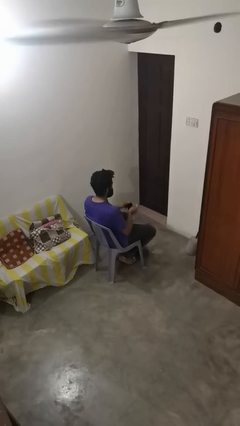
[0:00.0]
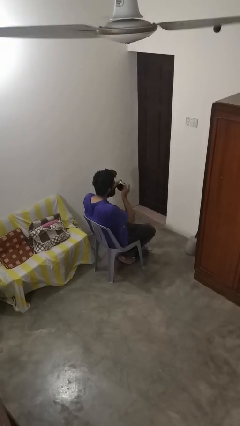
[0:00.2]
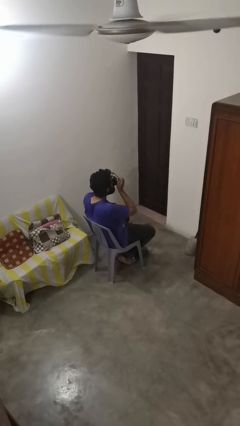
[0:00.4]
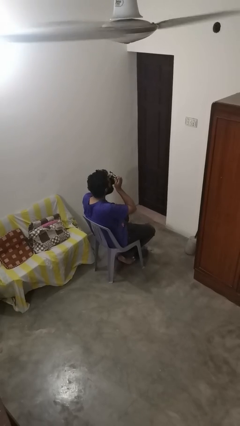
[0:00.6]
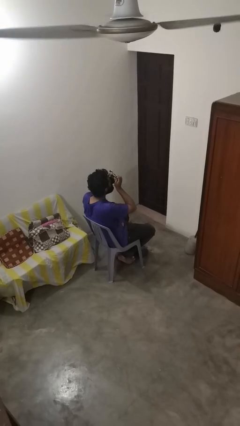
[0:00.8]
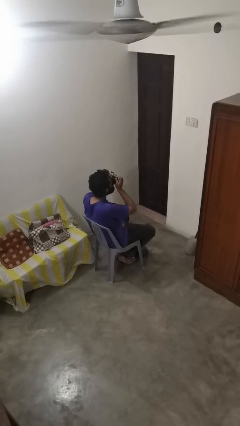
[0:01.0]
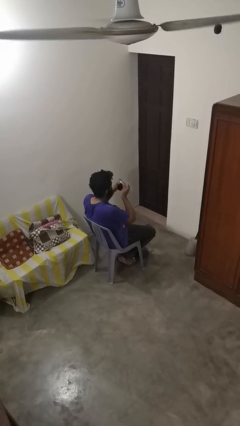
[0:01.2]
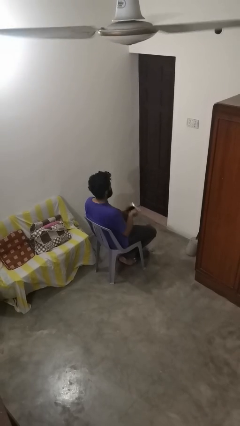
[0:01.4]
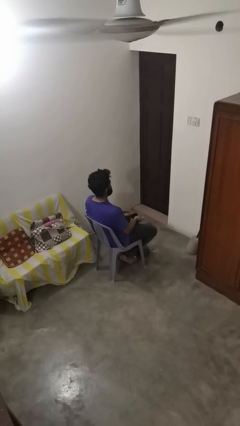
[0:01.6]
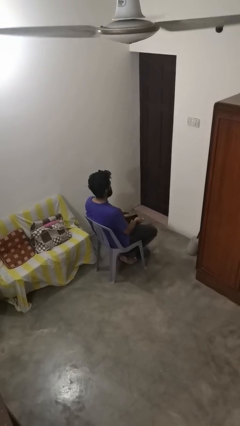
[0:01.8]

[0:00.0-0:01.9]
person drinks from mug

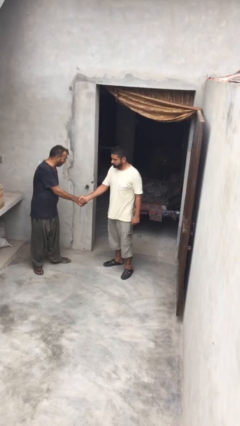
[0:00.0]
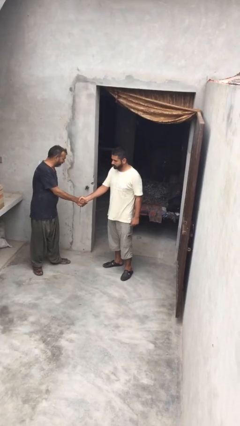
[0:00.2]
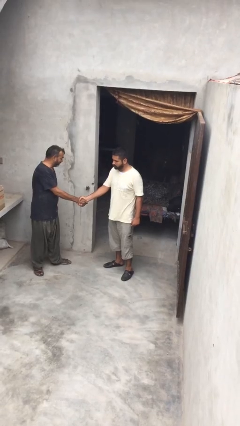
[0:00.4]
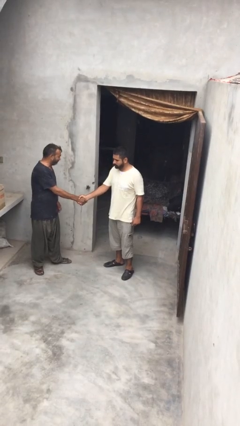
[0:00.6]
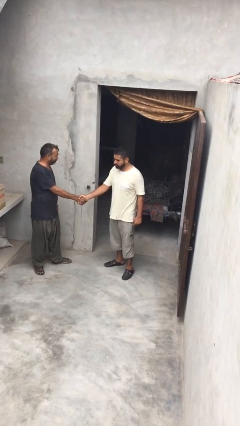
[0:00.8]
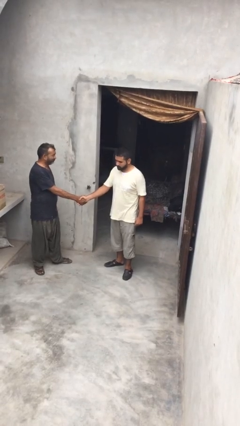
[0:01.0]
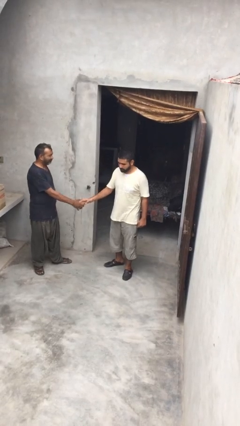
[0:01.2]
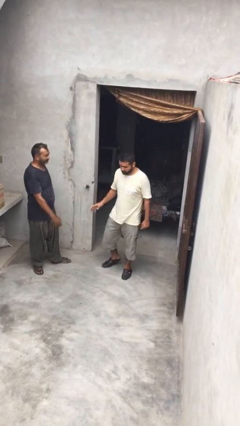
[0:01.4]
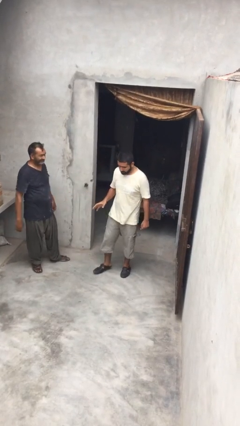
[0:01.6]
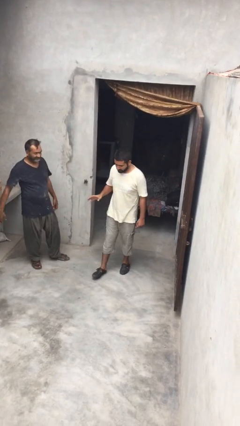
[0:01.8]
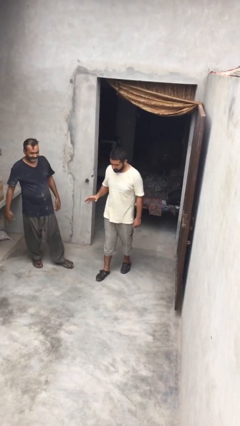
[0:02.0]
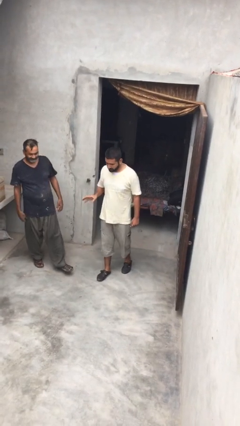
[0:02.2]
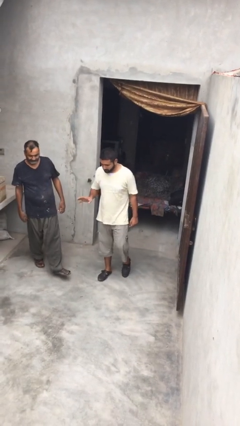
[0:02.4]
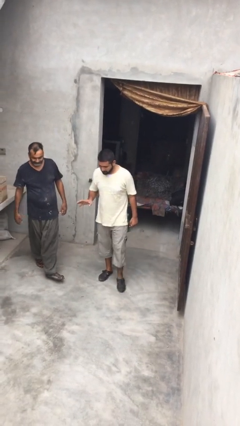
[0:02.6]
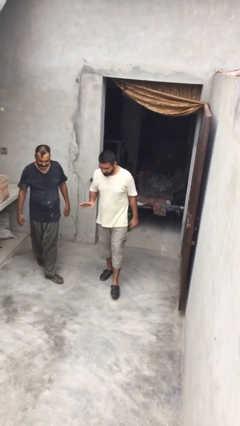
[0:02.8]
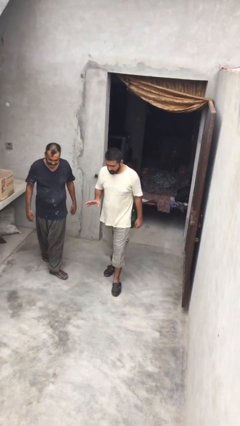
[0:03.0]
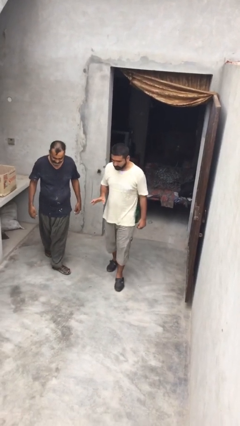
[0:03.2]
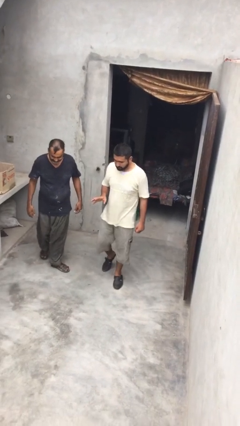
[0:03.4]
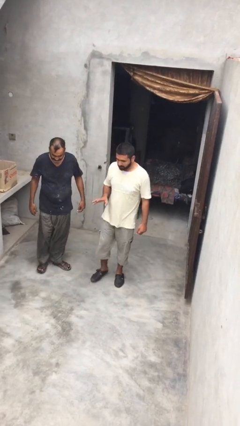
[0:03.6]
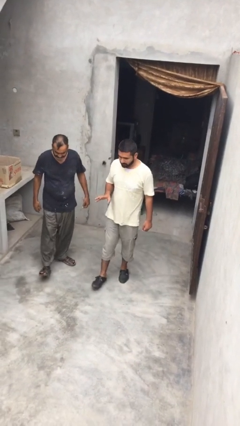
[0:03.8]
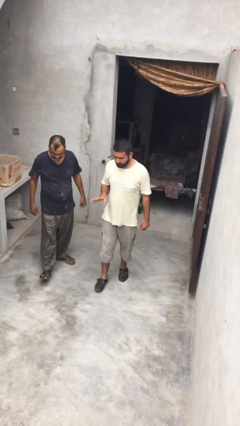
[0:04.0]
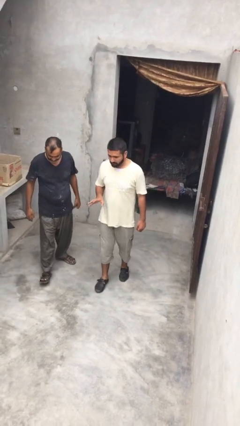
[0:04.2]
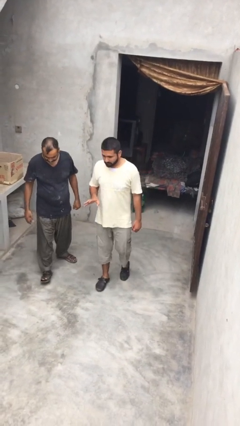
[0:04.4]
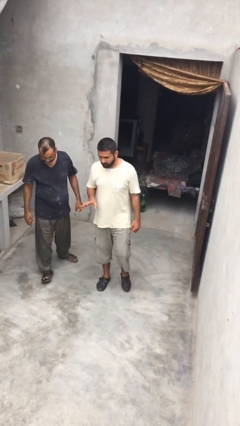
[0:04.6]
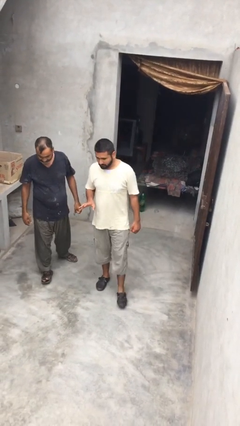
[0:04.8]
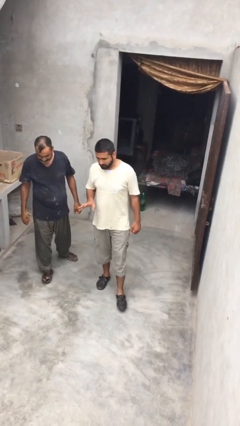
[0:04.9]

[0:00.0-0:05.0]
person talks to person

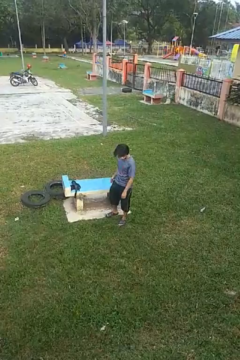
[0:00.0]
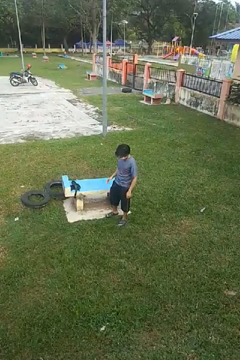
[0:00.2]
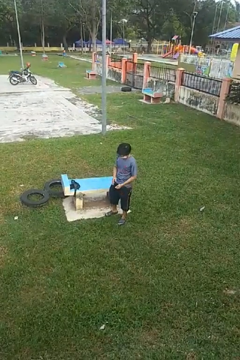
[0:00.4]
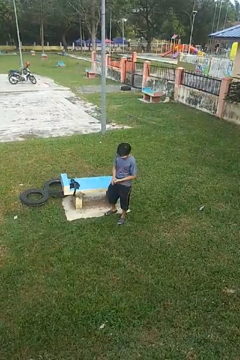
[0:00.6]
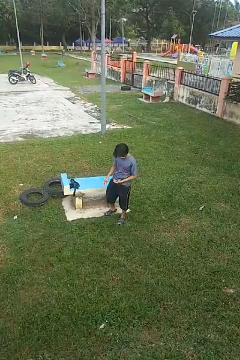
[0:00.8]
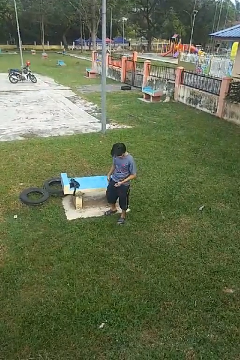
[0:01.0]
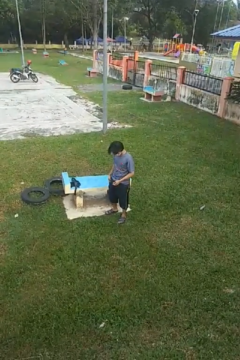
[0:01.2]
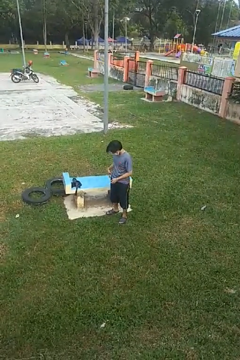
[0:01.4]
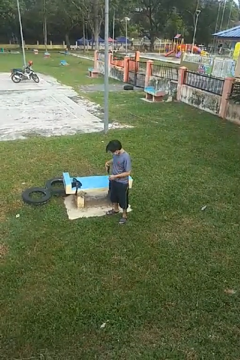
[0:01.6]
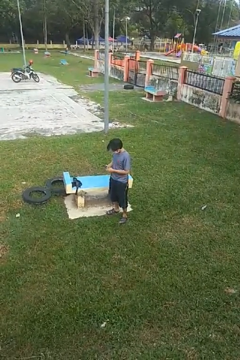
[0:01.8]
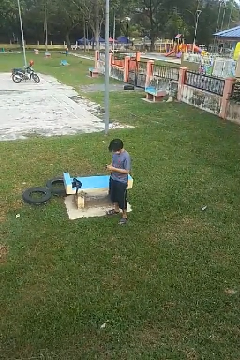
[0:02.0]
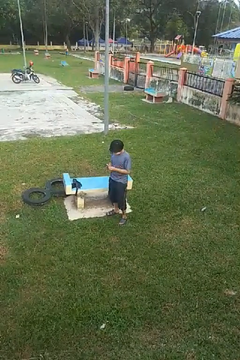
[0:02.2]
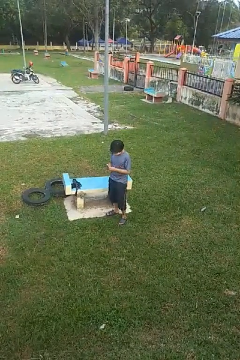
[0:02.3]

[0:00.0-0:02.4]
person takes phone from pocket

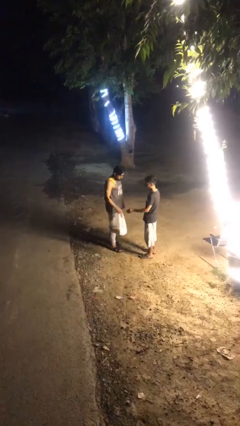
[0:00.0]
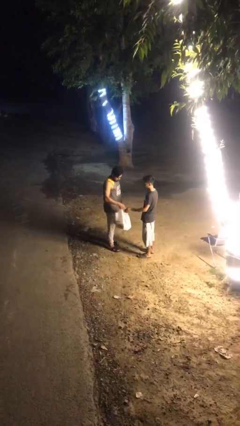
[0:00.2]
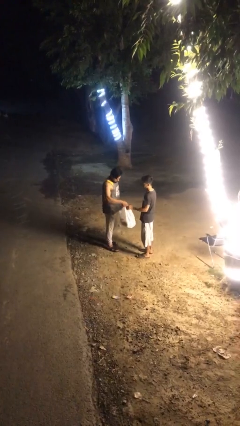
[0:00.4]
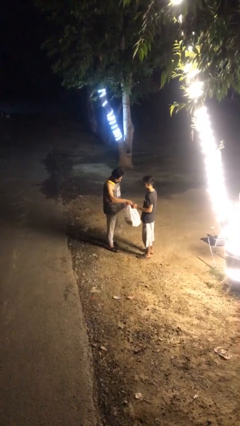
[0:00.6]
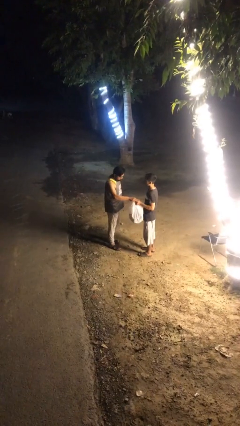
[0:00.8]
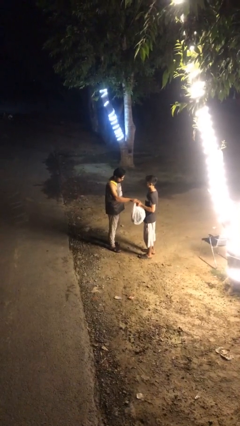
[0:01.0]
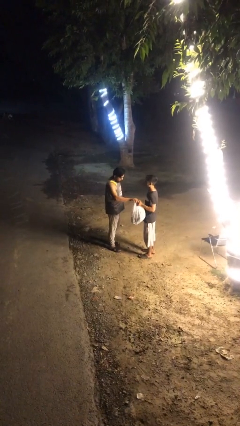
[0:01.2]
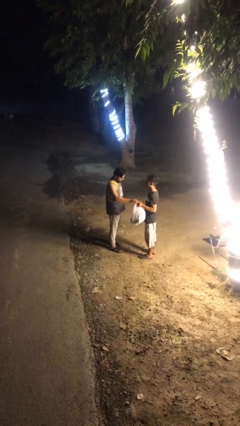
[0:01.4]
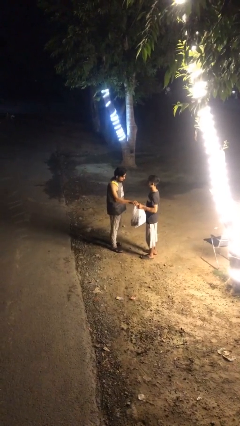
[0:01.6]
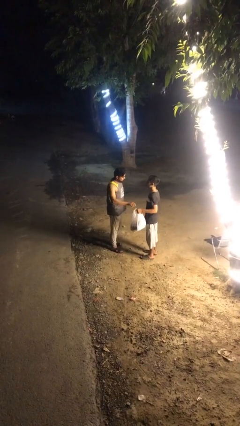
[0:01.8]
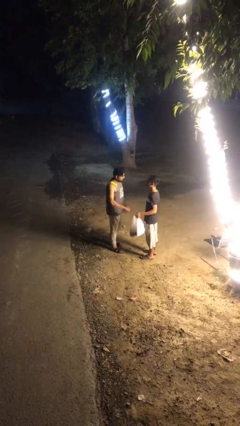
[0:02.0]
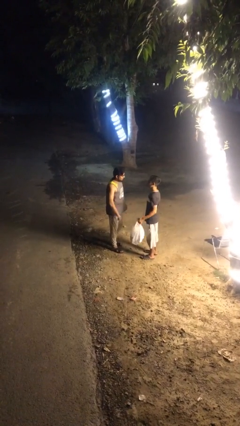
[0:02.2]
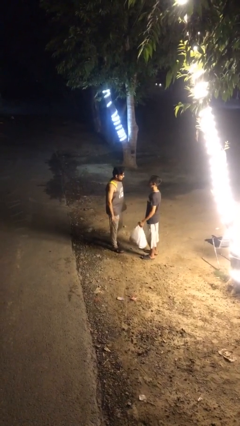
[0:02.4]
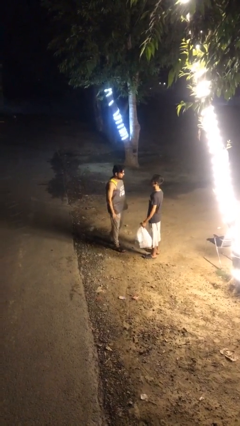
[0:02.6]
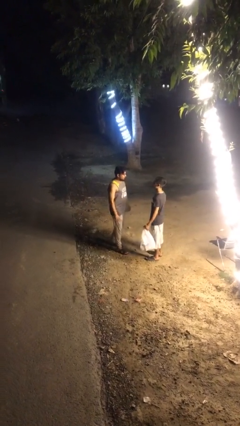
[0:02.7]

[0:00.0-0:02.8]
person transfers object to person

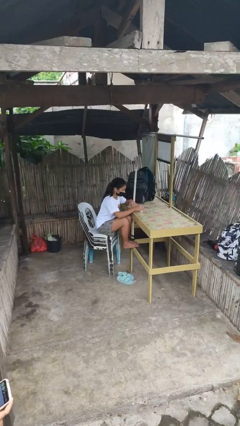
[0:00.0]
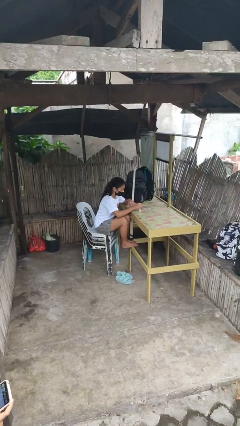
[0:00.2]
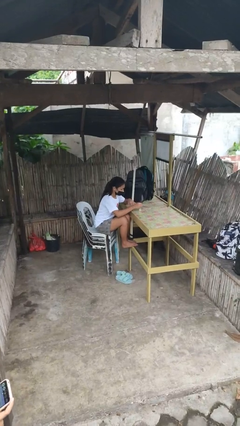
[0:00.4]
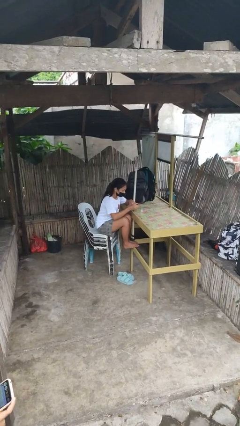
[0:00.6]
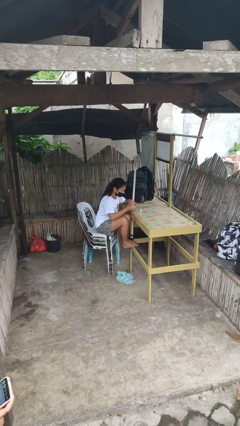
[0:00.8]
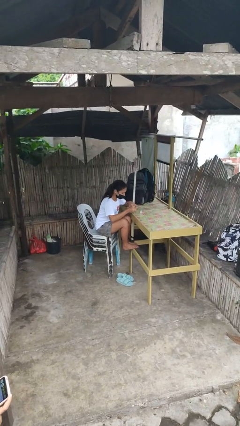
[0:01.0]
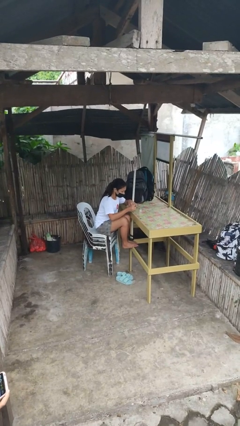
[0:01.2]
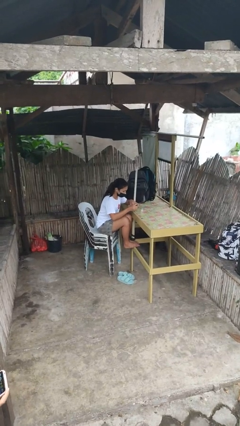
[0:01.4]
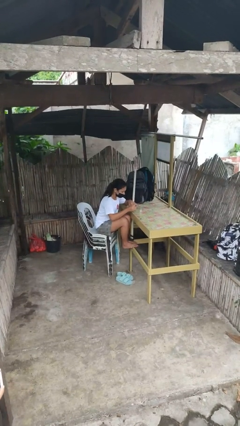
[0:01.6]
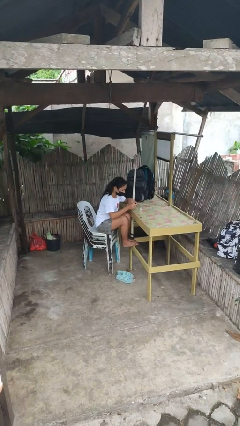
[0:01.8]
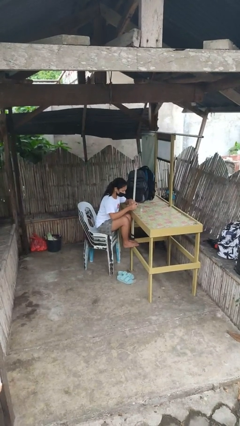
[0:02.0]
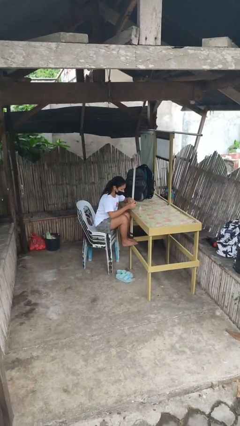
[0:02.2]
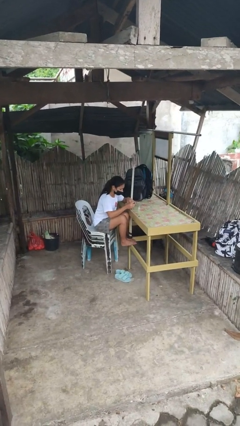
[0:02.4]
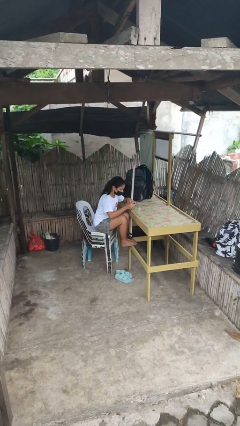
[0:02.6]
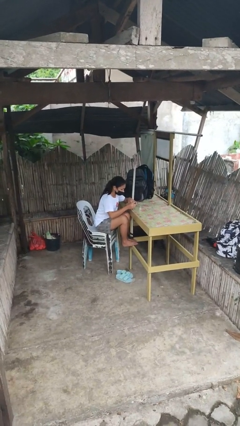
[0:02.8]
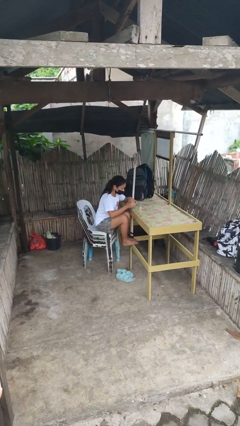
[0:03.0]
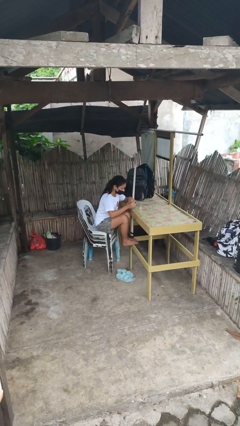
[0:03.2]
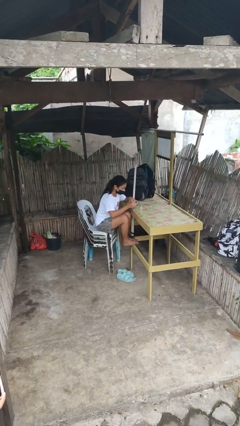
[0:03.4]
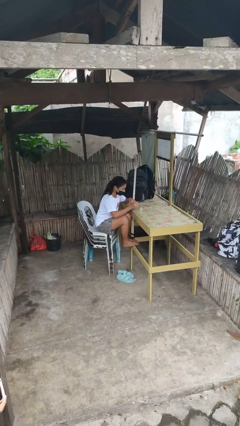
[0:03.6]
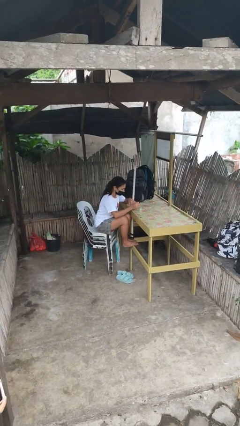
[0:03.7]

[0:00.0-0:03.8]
person paints fingernails

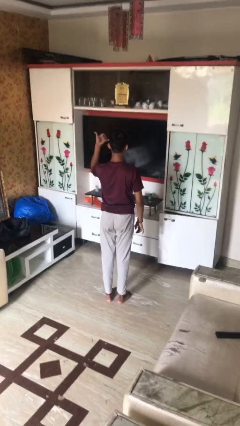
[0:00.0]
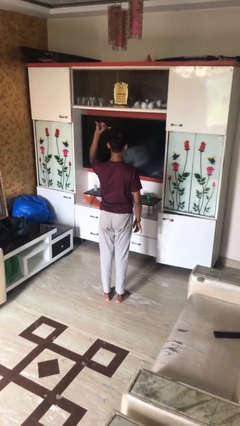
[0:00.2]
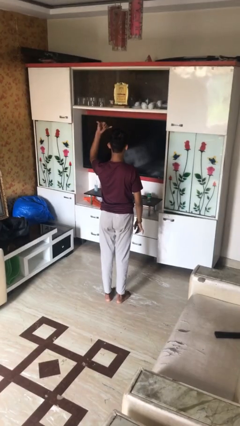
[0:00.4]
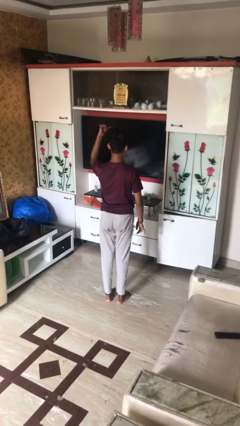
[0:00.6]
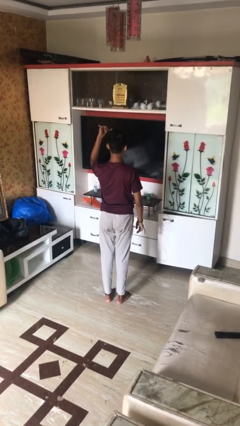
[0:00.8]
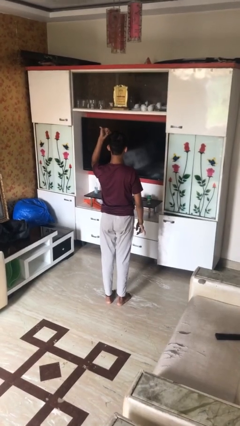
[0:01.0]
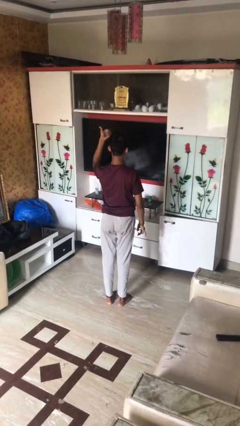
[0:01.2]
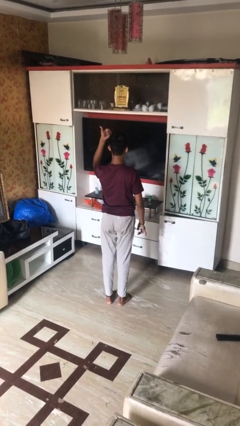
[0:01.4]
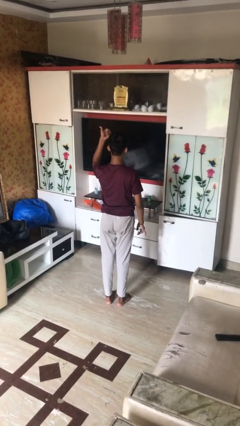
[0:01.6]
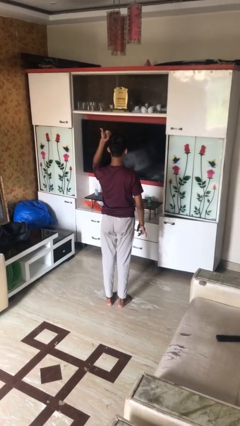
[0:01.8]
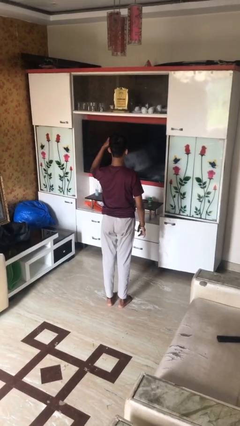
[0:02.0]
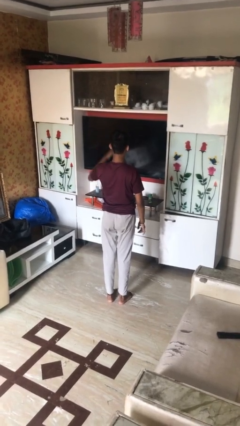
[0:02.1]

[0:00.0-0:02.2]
person gestures hang loose
